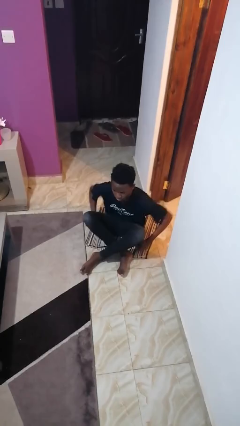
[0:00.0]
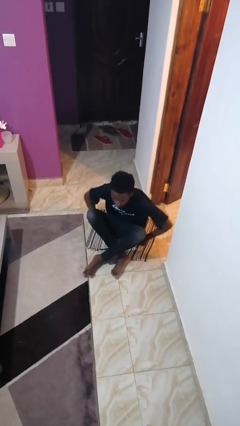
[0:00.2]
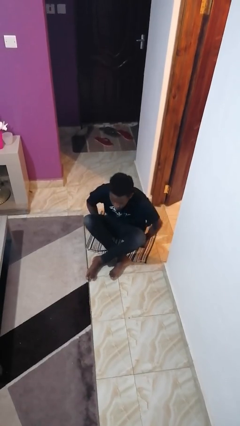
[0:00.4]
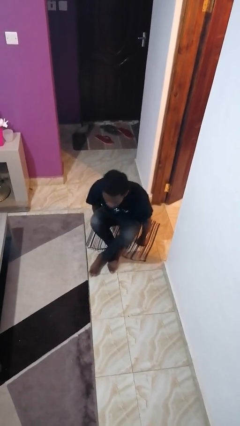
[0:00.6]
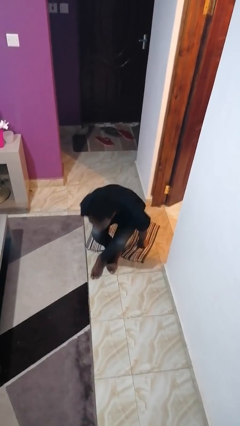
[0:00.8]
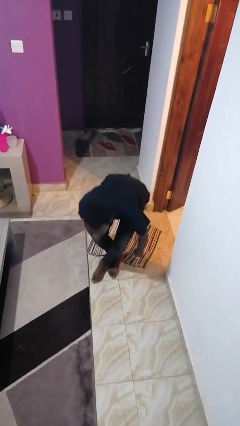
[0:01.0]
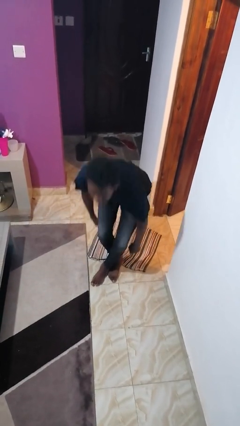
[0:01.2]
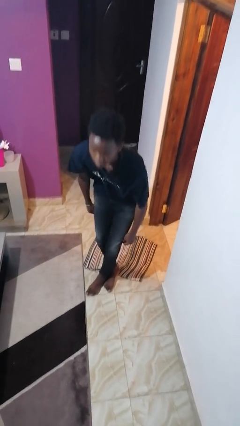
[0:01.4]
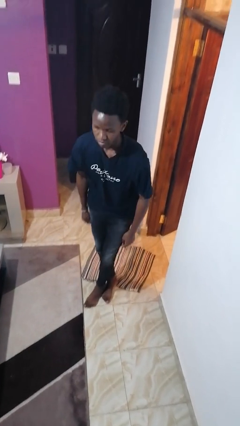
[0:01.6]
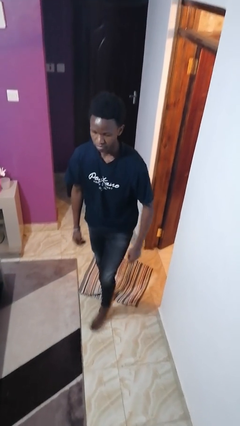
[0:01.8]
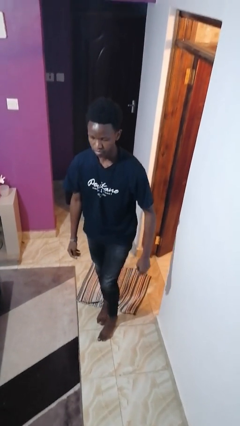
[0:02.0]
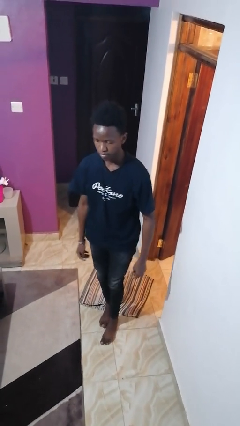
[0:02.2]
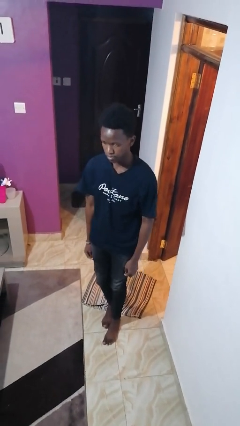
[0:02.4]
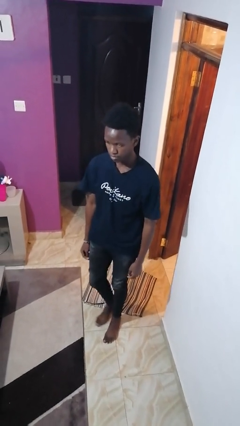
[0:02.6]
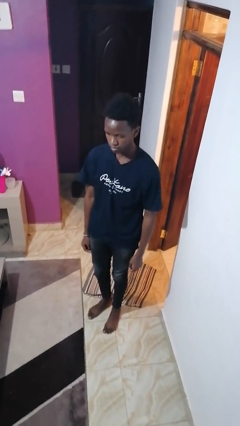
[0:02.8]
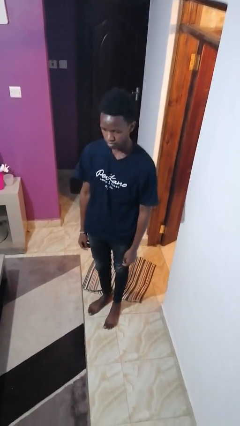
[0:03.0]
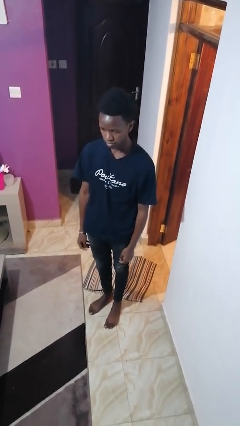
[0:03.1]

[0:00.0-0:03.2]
person stands up from floor

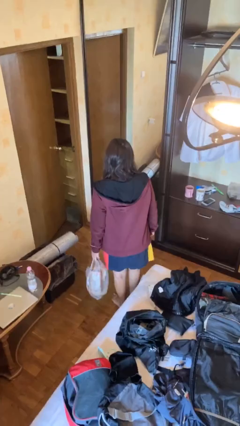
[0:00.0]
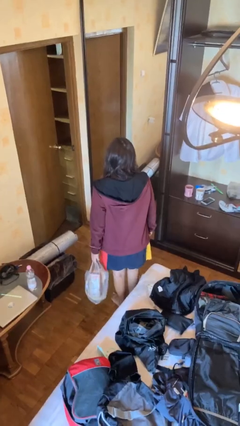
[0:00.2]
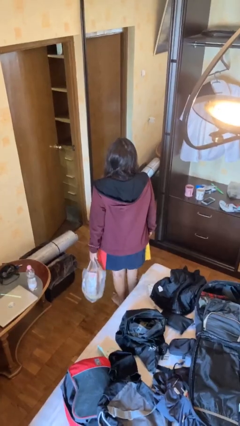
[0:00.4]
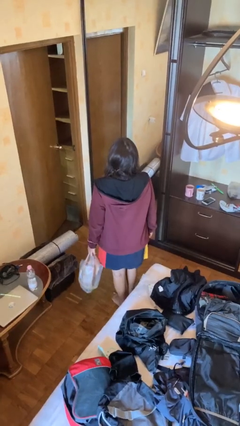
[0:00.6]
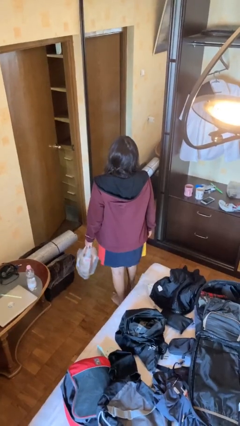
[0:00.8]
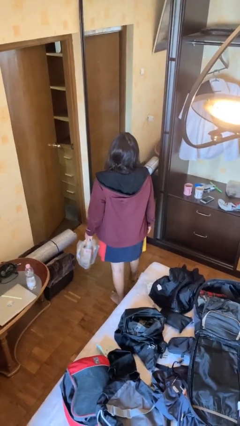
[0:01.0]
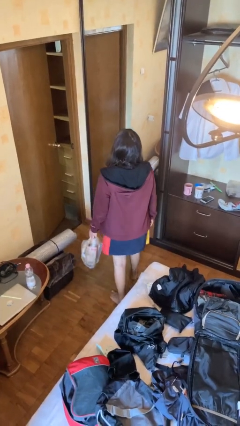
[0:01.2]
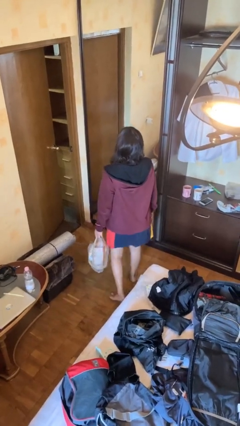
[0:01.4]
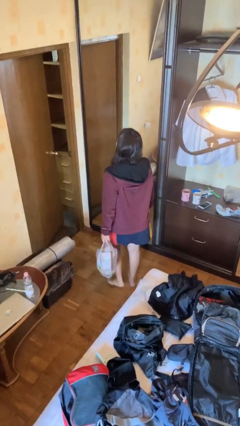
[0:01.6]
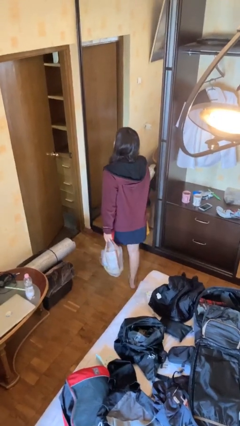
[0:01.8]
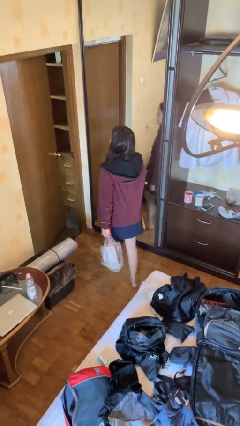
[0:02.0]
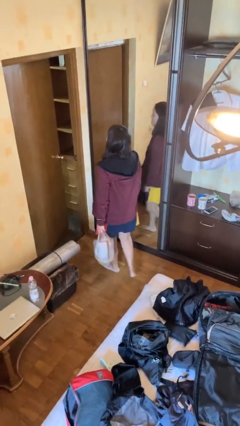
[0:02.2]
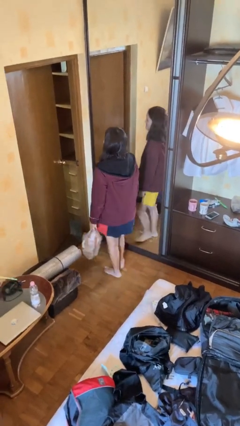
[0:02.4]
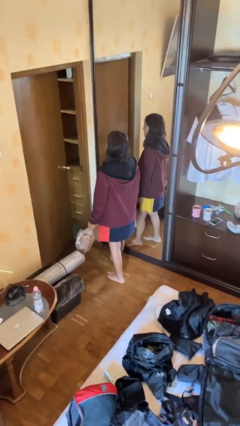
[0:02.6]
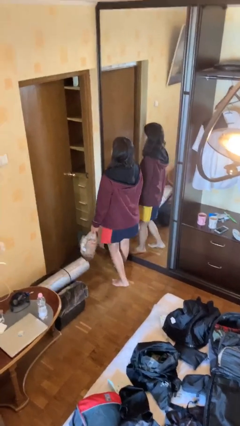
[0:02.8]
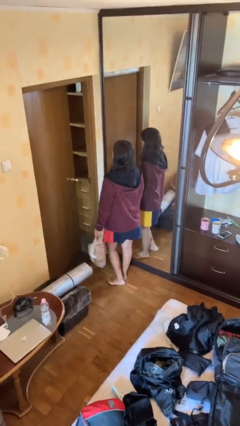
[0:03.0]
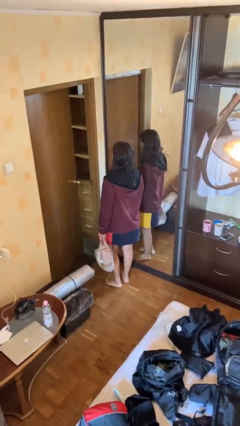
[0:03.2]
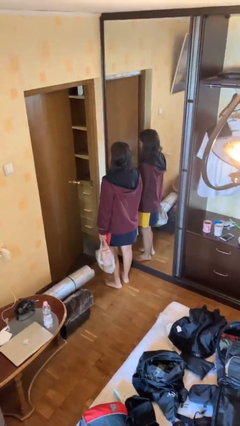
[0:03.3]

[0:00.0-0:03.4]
person carries groceries

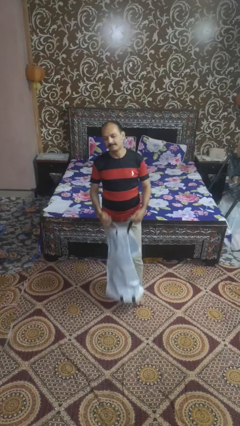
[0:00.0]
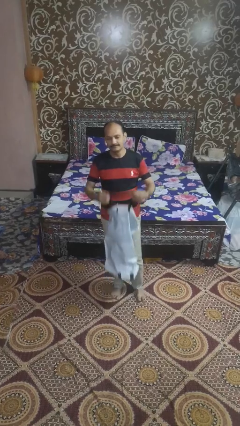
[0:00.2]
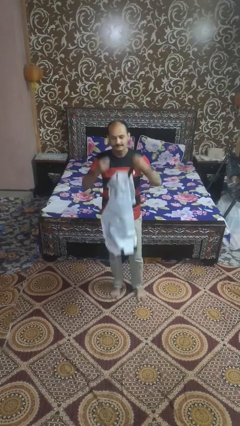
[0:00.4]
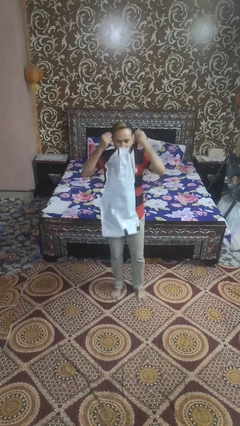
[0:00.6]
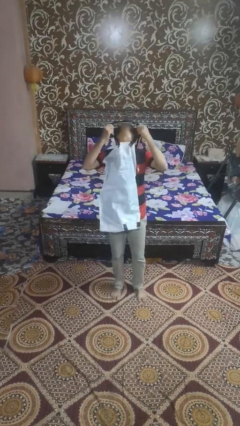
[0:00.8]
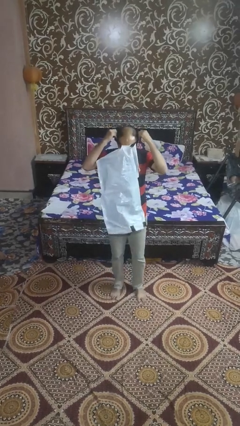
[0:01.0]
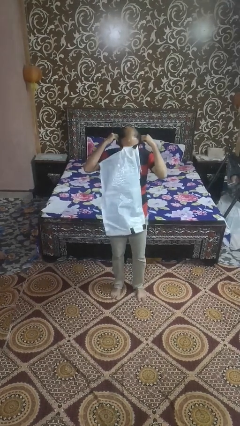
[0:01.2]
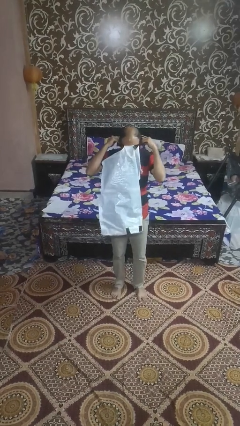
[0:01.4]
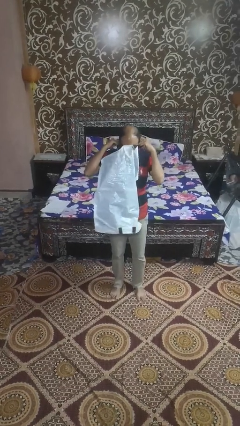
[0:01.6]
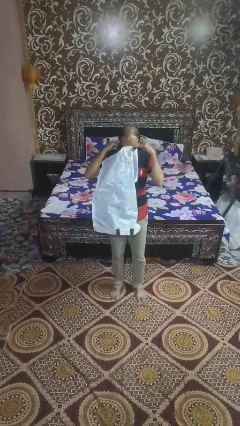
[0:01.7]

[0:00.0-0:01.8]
person tears paper

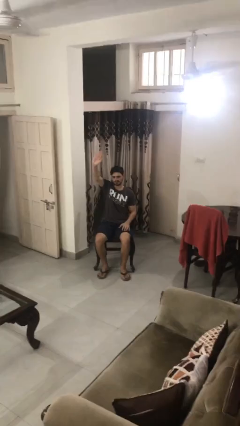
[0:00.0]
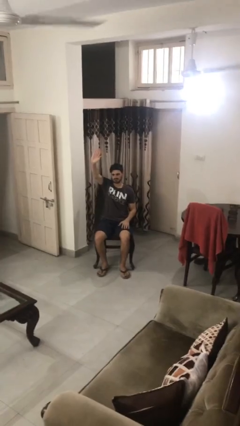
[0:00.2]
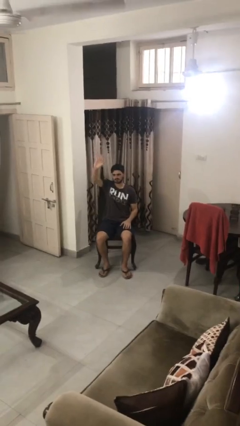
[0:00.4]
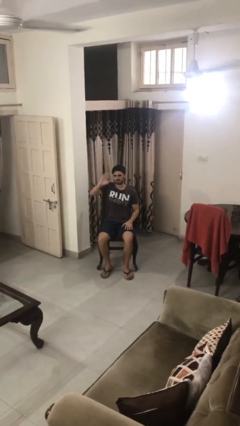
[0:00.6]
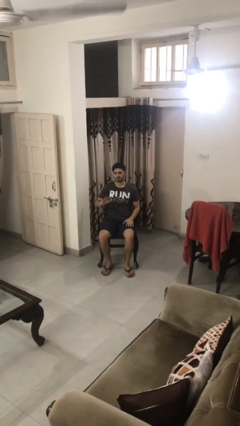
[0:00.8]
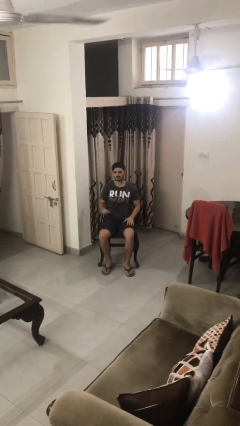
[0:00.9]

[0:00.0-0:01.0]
person gestures lower hand

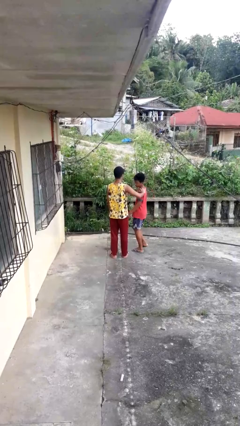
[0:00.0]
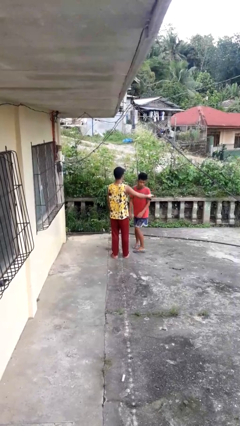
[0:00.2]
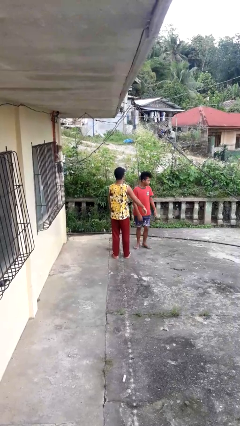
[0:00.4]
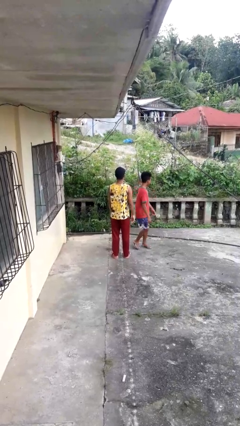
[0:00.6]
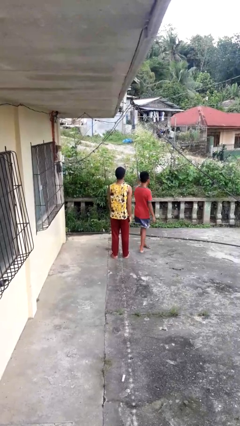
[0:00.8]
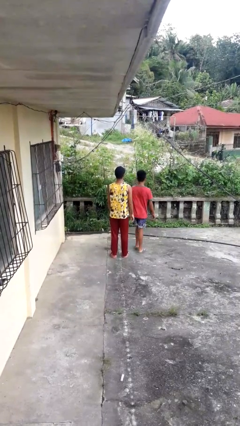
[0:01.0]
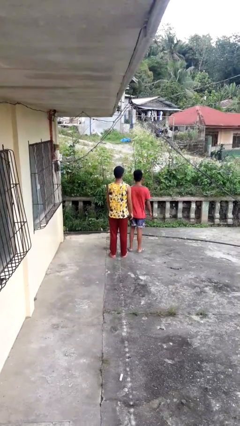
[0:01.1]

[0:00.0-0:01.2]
person spins person around

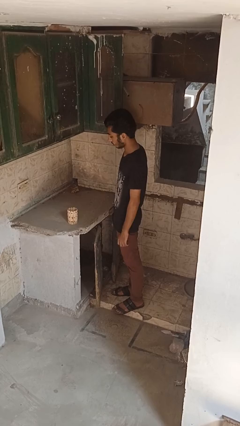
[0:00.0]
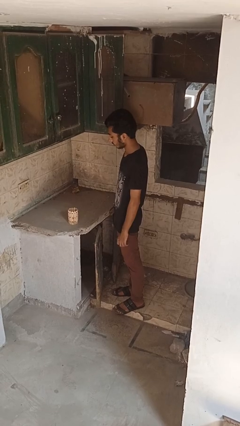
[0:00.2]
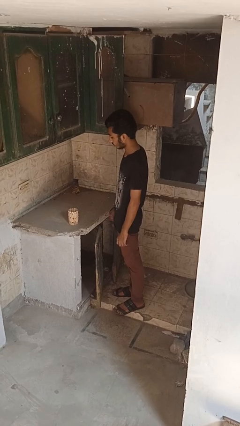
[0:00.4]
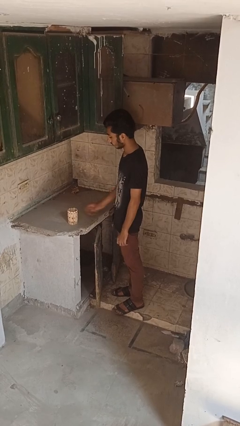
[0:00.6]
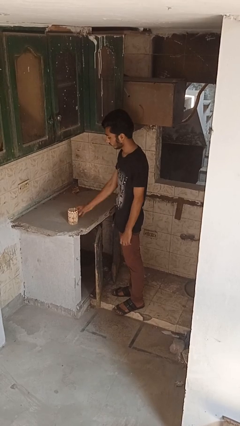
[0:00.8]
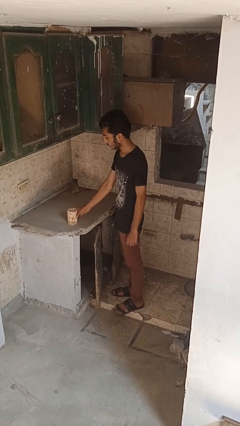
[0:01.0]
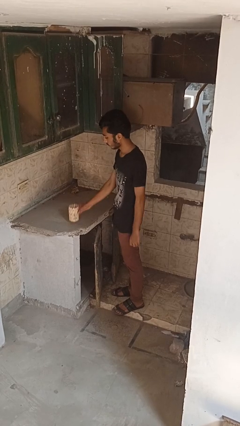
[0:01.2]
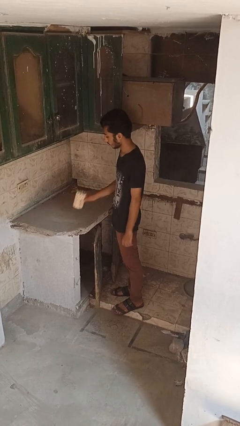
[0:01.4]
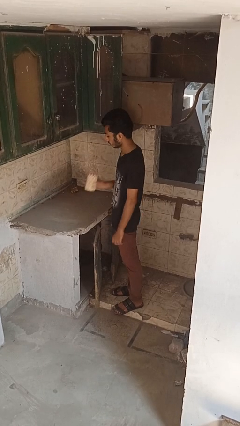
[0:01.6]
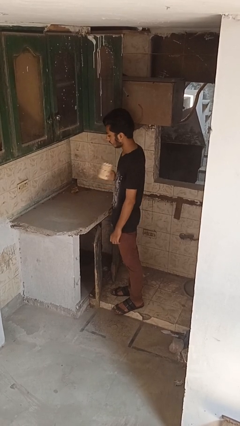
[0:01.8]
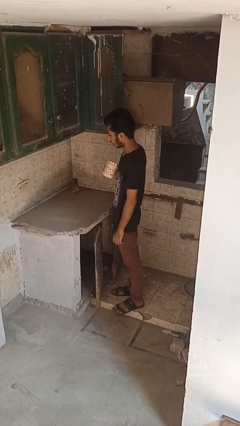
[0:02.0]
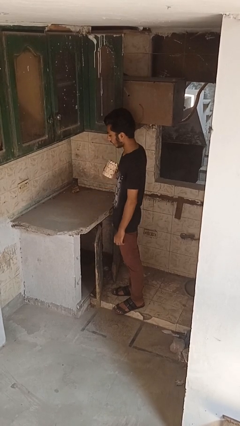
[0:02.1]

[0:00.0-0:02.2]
person picks up object from countertop

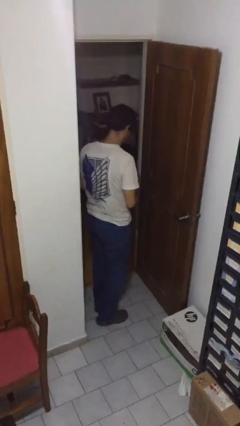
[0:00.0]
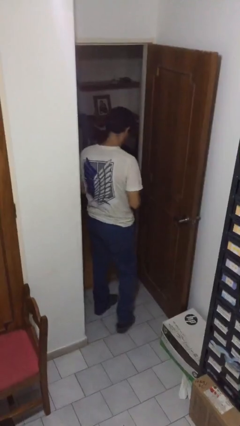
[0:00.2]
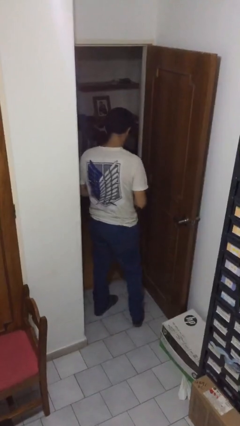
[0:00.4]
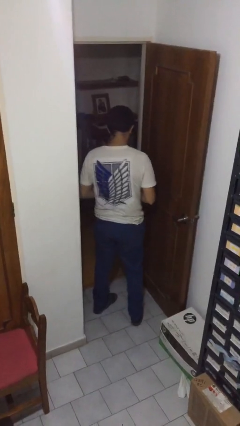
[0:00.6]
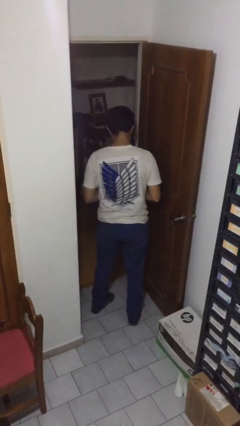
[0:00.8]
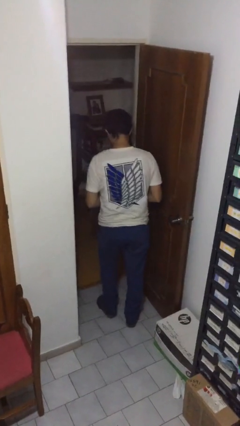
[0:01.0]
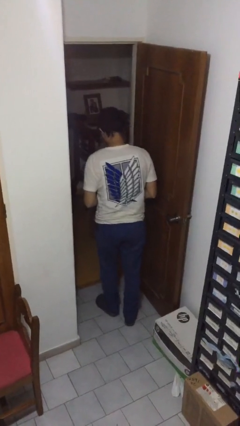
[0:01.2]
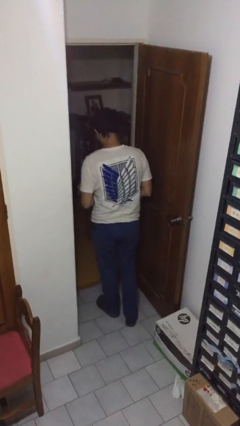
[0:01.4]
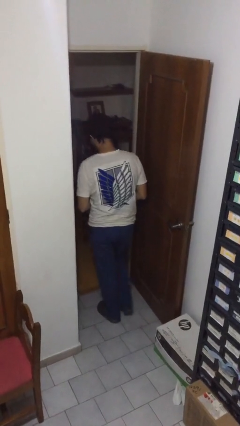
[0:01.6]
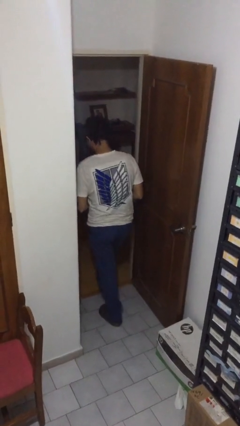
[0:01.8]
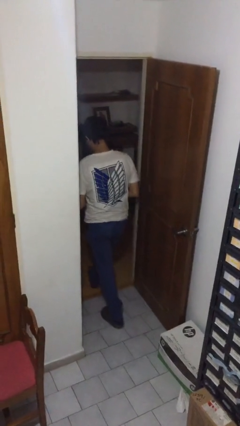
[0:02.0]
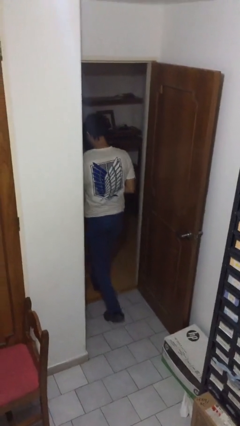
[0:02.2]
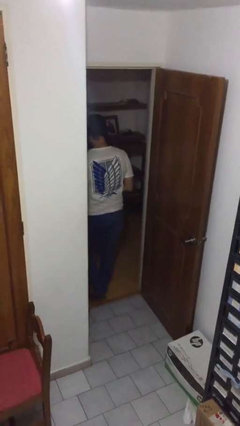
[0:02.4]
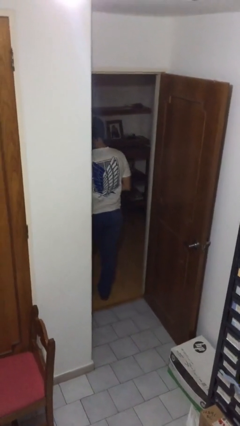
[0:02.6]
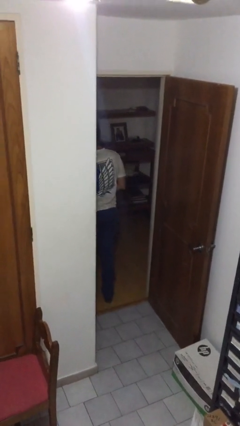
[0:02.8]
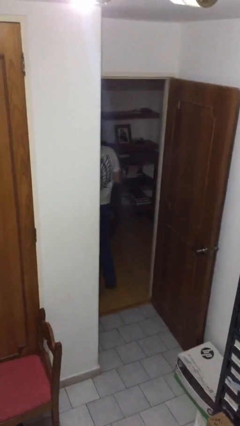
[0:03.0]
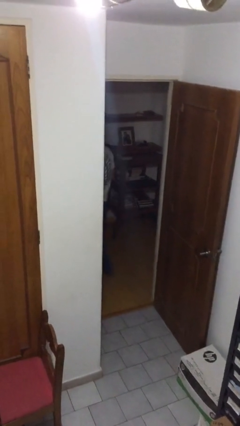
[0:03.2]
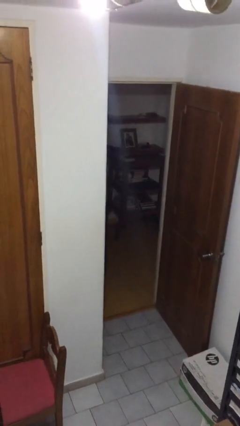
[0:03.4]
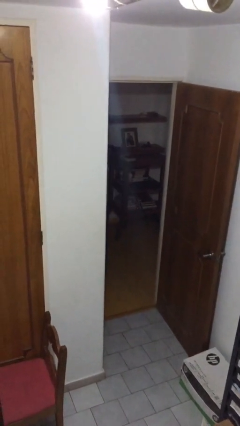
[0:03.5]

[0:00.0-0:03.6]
person exits scene through structure

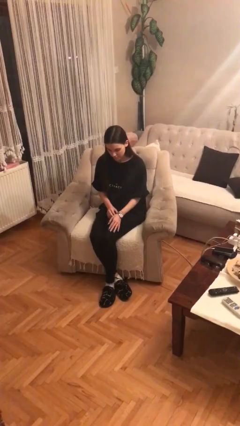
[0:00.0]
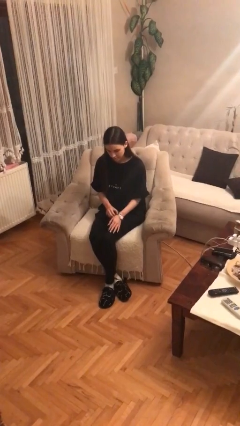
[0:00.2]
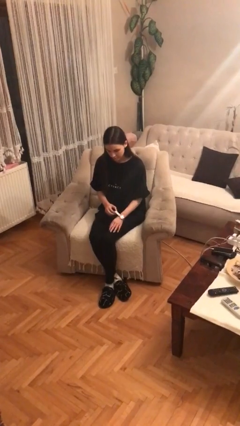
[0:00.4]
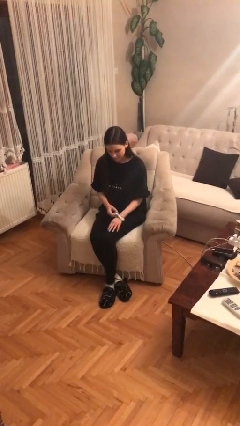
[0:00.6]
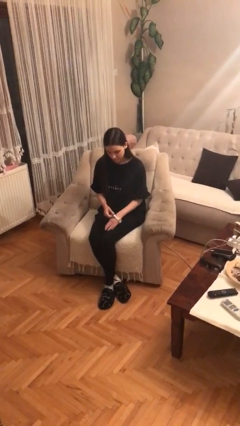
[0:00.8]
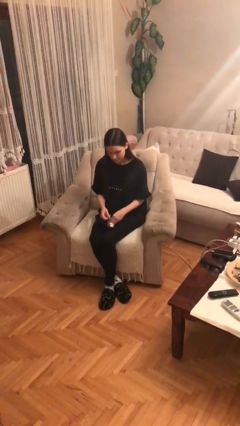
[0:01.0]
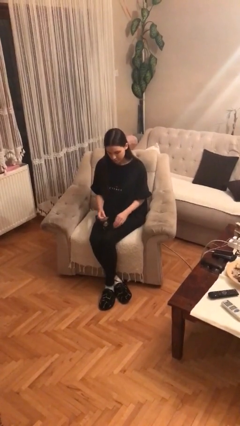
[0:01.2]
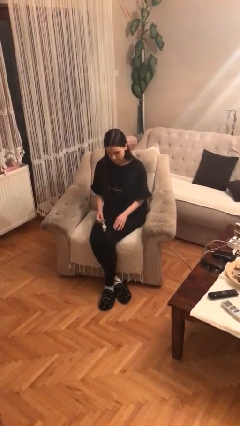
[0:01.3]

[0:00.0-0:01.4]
person takes off wristwatch
